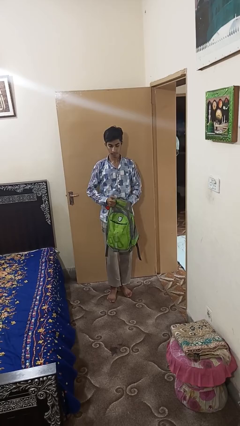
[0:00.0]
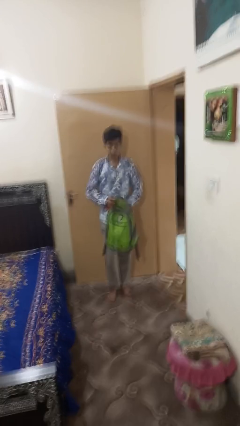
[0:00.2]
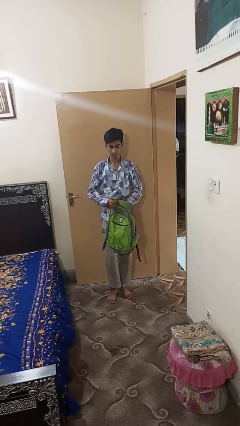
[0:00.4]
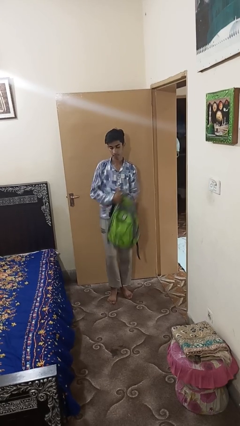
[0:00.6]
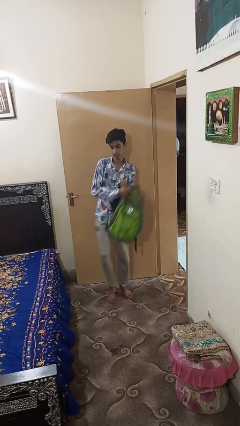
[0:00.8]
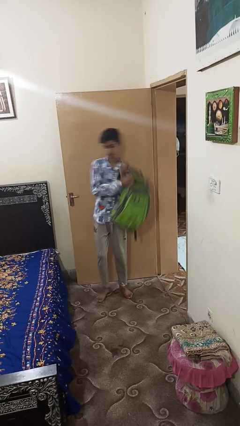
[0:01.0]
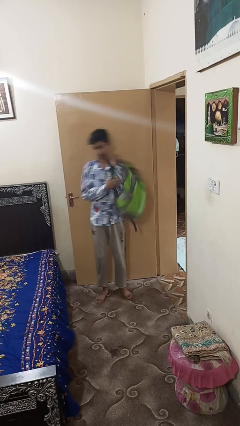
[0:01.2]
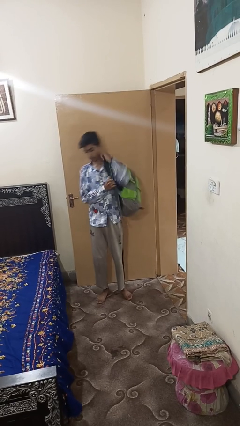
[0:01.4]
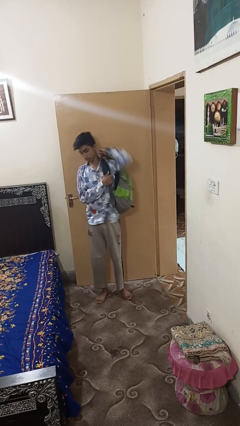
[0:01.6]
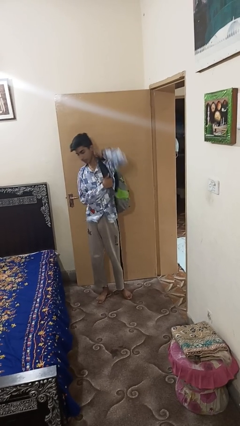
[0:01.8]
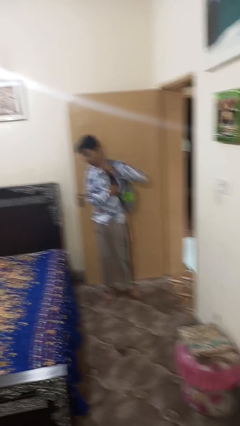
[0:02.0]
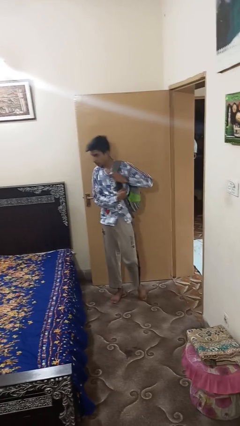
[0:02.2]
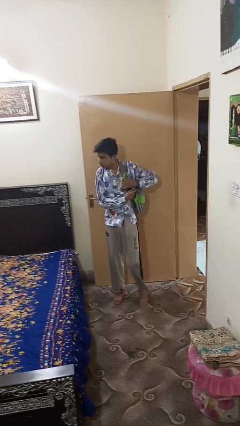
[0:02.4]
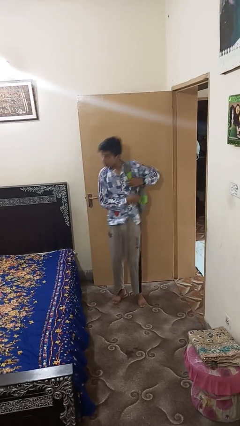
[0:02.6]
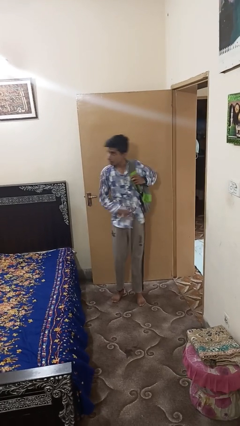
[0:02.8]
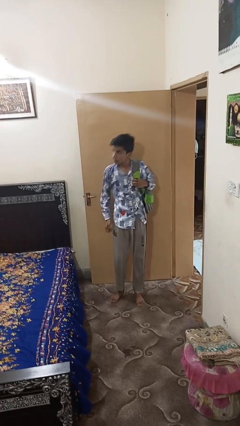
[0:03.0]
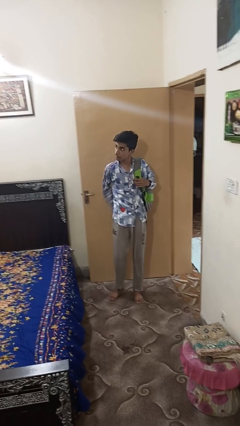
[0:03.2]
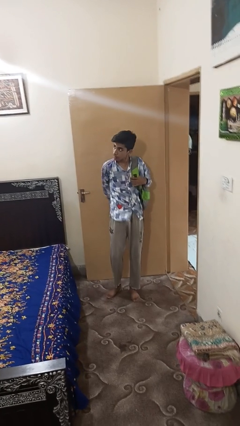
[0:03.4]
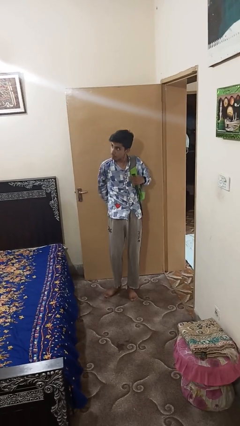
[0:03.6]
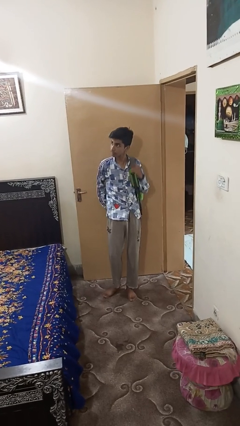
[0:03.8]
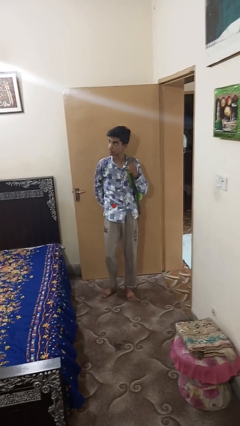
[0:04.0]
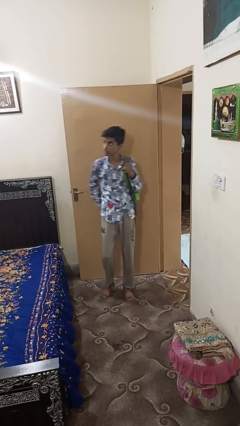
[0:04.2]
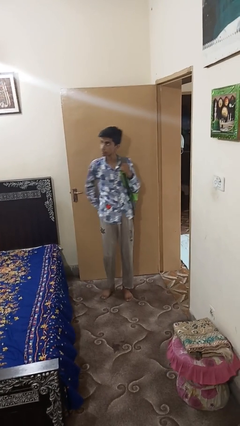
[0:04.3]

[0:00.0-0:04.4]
person puts on backpack

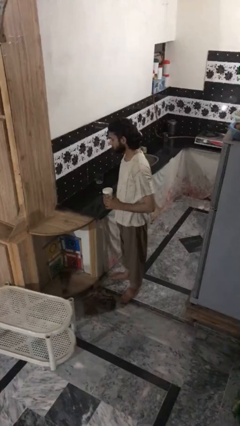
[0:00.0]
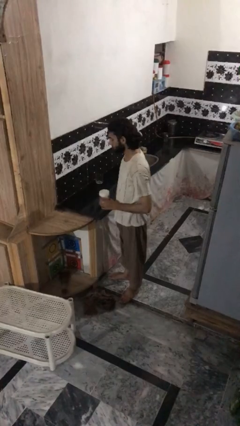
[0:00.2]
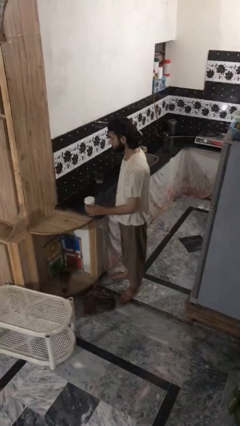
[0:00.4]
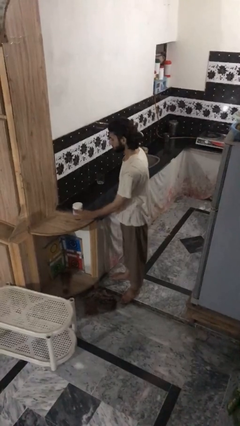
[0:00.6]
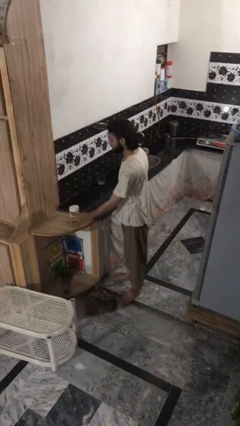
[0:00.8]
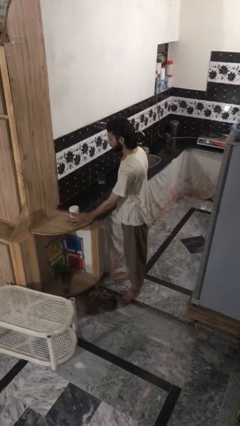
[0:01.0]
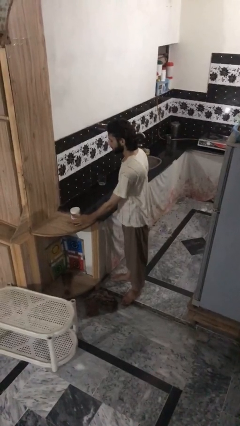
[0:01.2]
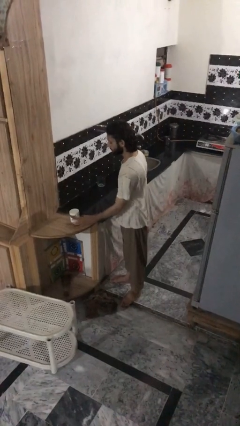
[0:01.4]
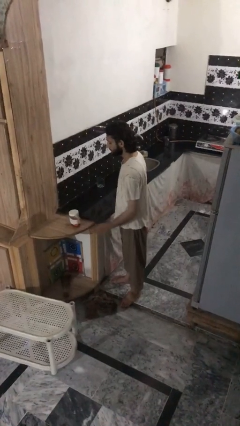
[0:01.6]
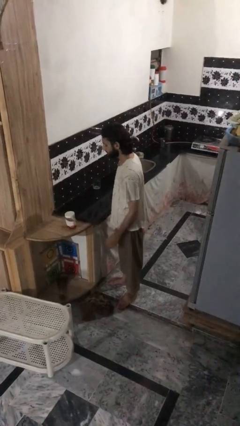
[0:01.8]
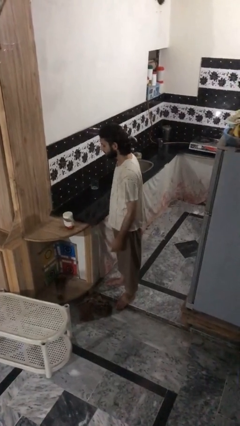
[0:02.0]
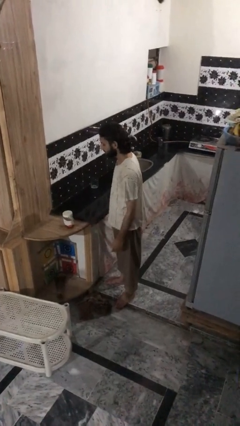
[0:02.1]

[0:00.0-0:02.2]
person puts down object on countertop

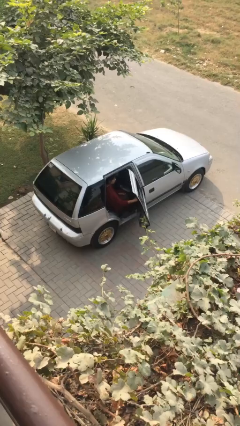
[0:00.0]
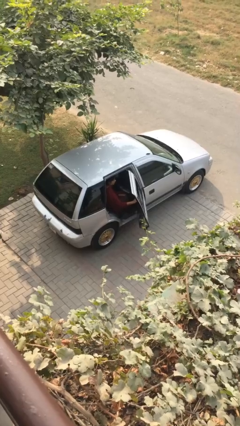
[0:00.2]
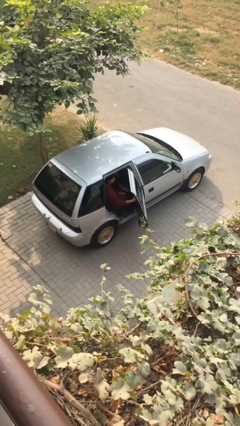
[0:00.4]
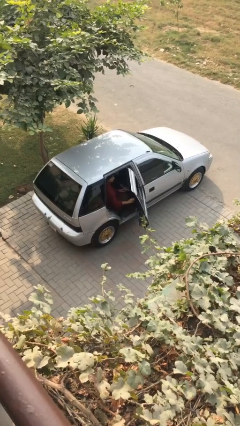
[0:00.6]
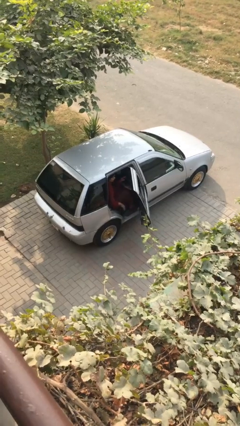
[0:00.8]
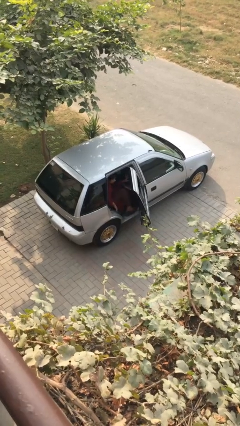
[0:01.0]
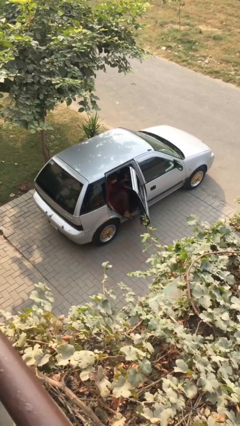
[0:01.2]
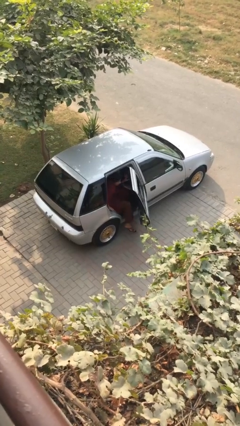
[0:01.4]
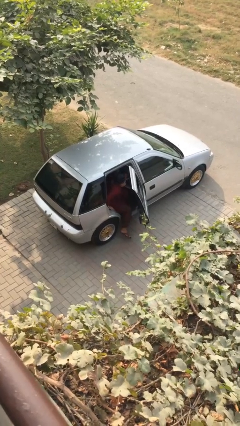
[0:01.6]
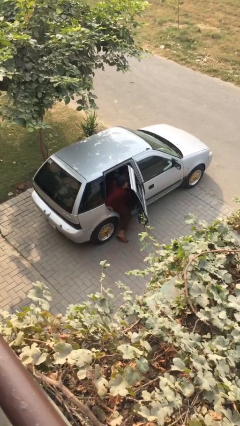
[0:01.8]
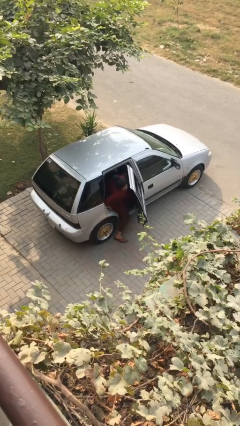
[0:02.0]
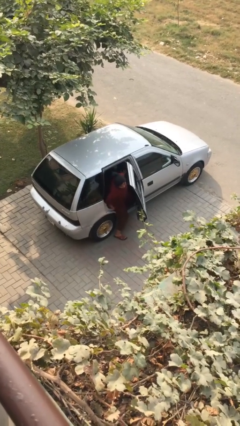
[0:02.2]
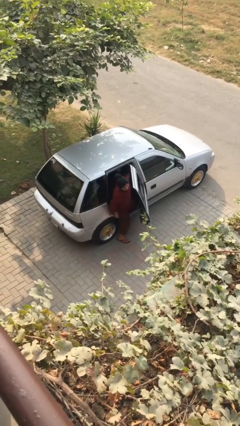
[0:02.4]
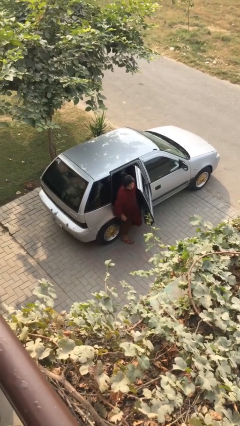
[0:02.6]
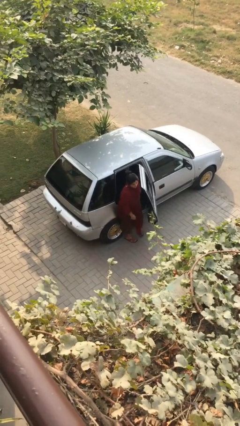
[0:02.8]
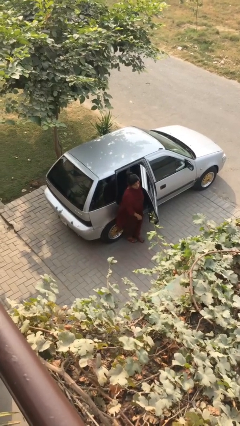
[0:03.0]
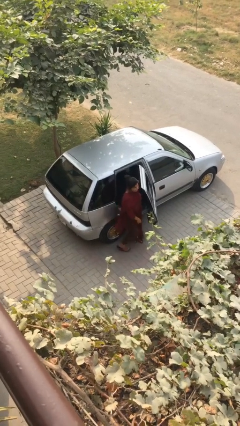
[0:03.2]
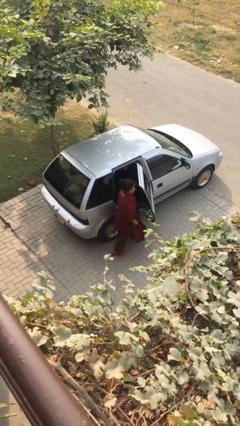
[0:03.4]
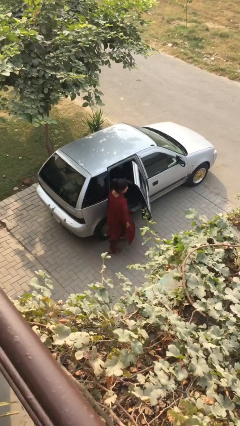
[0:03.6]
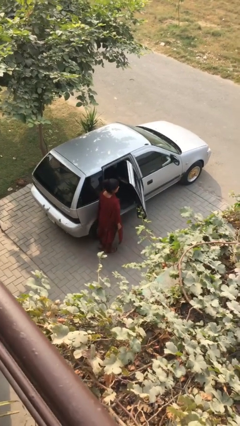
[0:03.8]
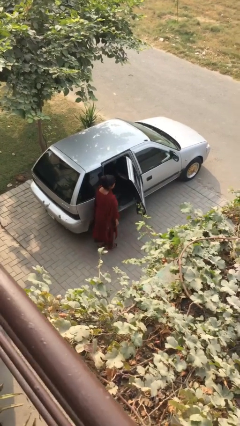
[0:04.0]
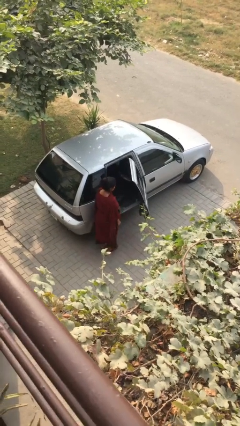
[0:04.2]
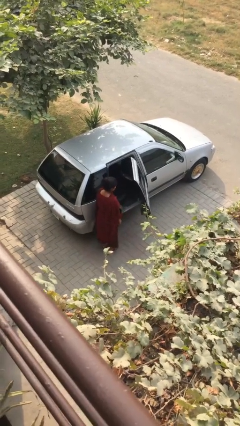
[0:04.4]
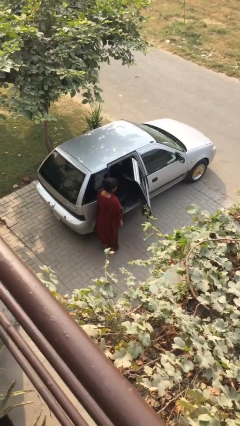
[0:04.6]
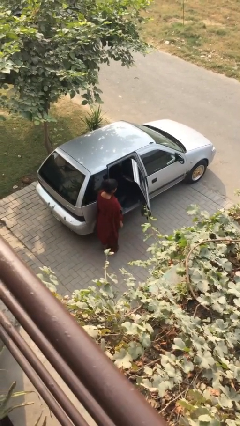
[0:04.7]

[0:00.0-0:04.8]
person exits car

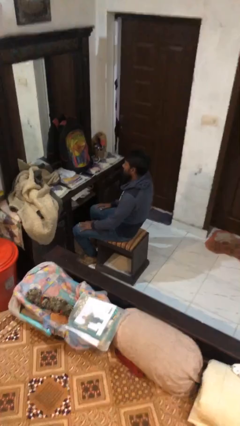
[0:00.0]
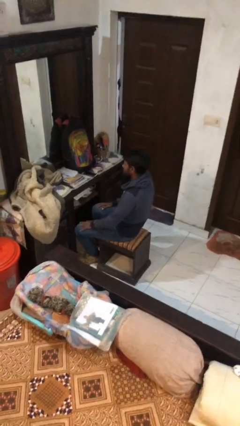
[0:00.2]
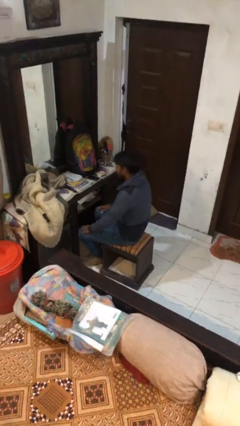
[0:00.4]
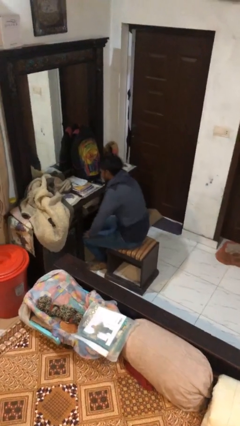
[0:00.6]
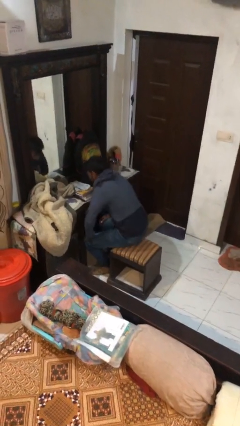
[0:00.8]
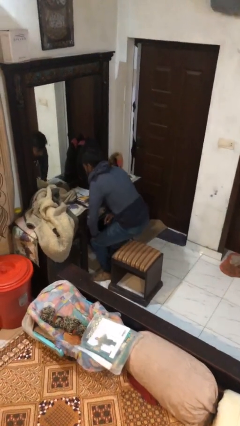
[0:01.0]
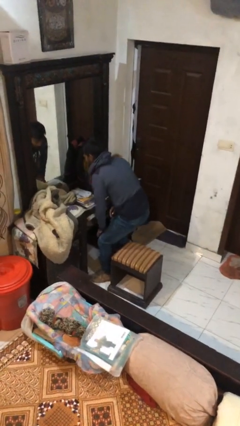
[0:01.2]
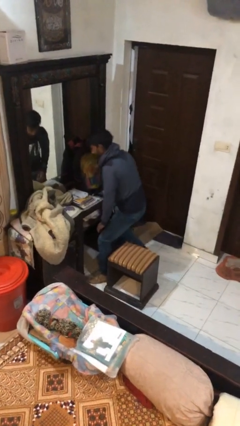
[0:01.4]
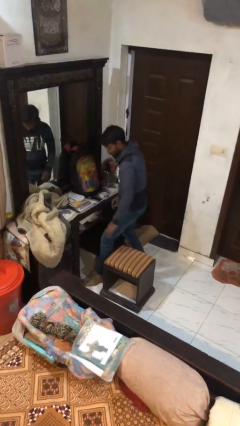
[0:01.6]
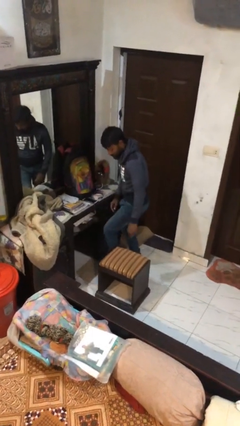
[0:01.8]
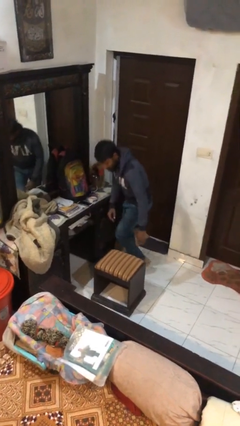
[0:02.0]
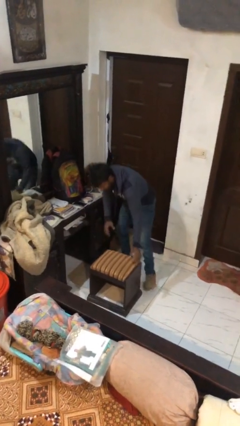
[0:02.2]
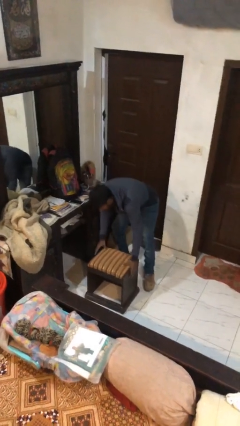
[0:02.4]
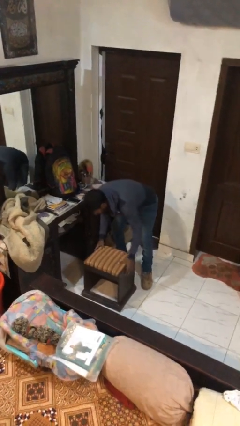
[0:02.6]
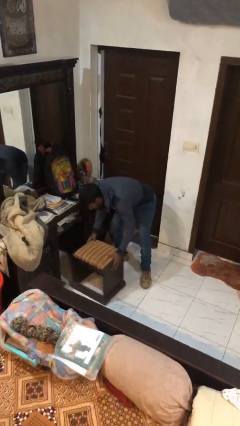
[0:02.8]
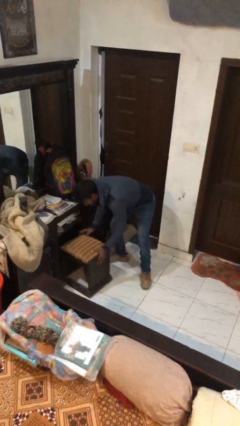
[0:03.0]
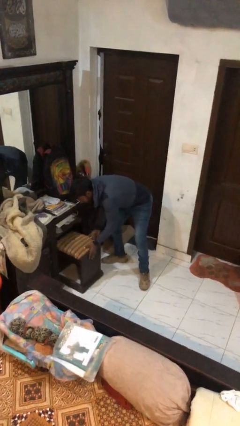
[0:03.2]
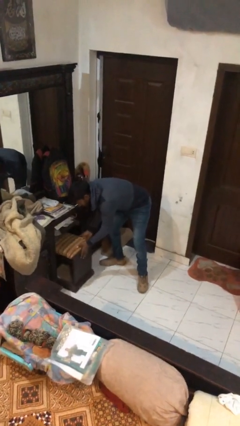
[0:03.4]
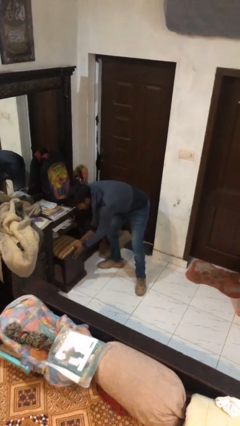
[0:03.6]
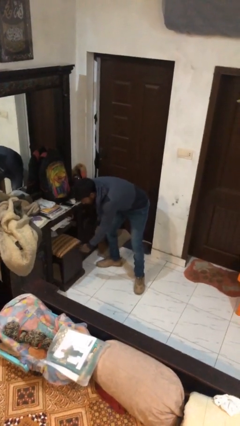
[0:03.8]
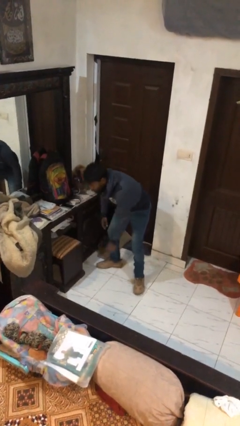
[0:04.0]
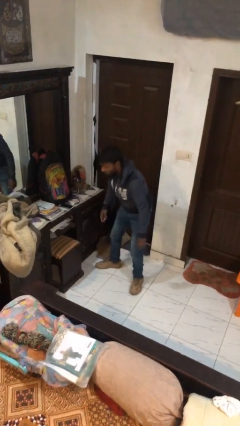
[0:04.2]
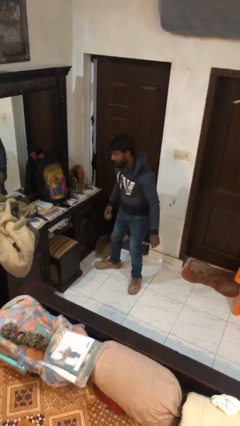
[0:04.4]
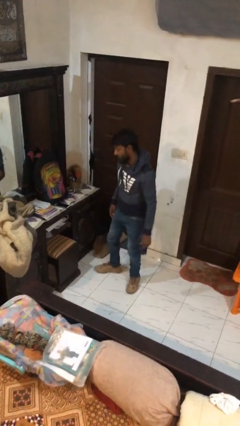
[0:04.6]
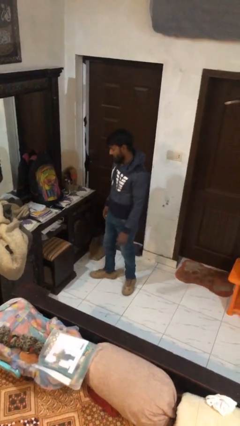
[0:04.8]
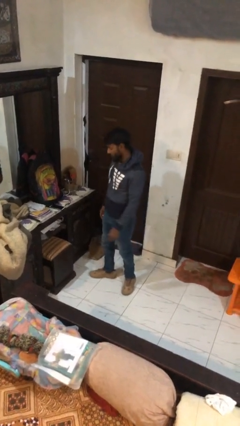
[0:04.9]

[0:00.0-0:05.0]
person stands up

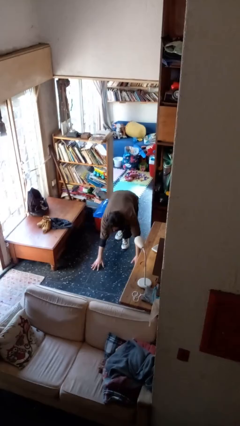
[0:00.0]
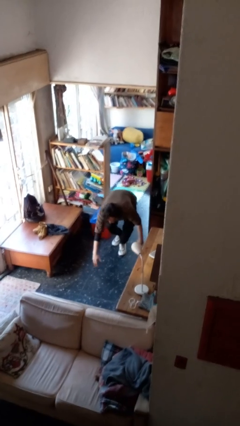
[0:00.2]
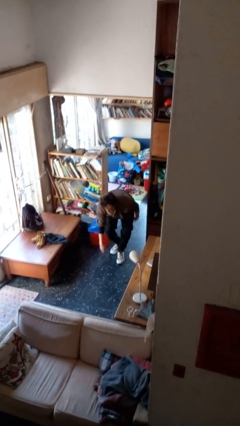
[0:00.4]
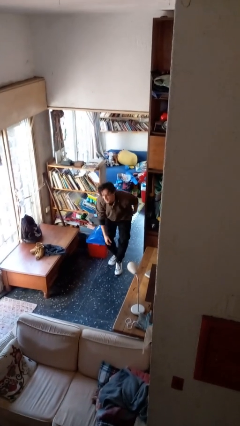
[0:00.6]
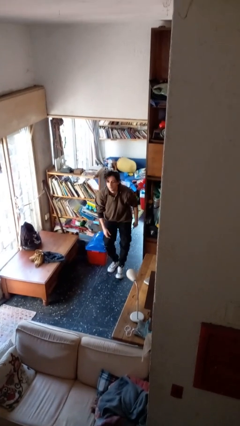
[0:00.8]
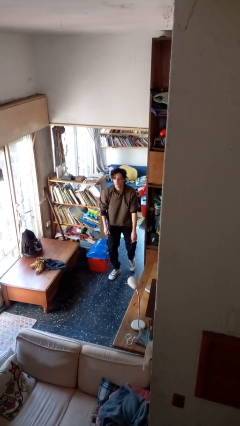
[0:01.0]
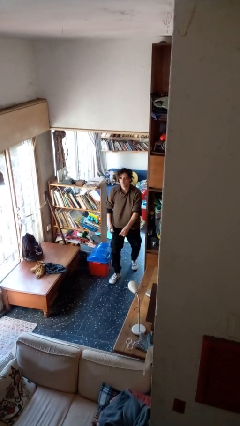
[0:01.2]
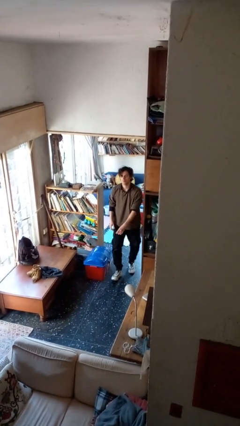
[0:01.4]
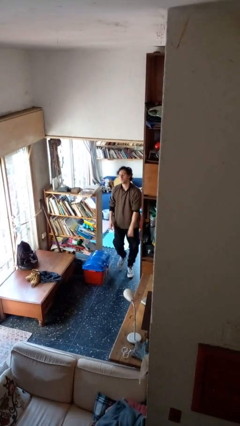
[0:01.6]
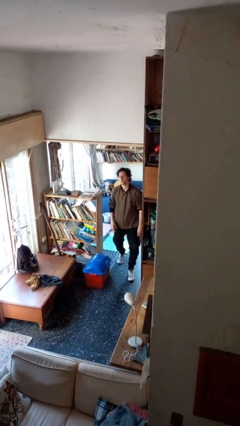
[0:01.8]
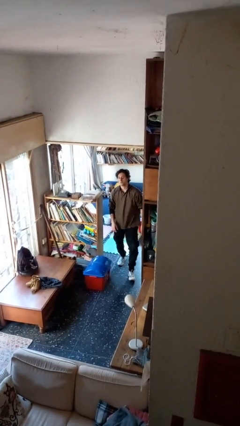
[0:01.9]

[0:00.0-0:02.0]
person stands up from floor
